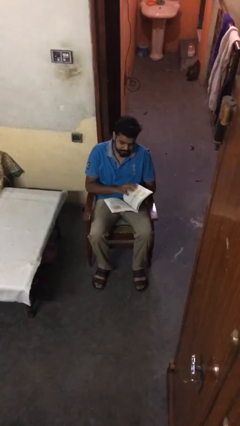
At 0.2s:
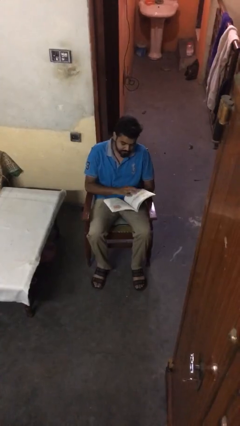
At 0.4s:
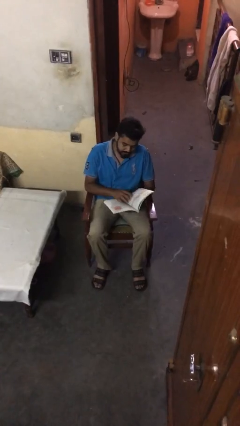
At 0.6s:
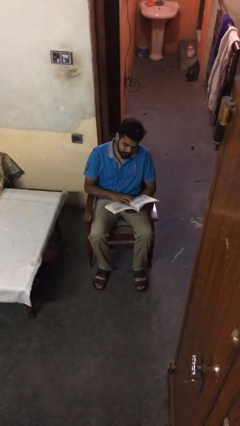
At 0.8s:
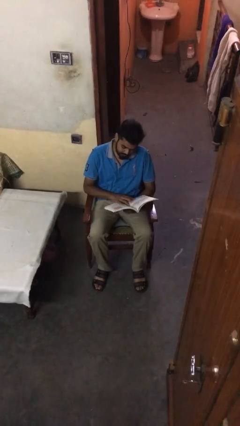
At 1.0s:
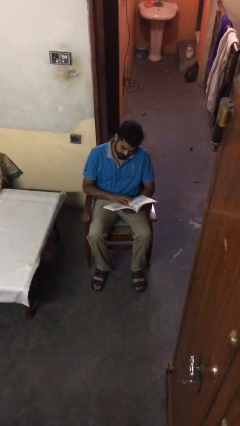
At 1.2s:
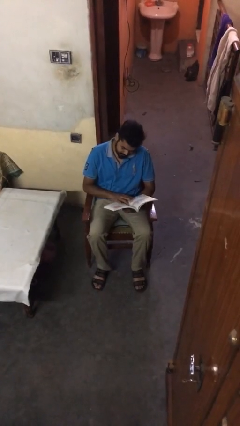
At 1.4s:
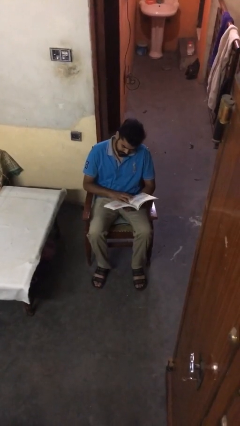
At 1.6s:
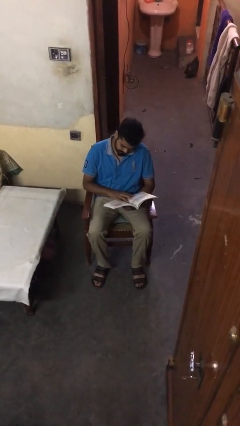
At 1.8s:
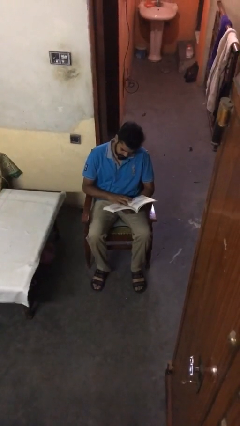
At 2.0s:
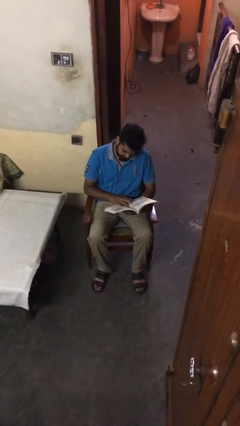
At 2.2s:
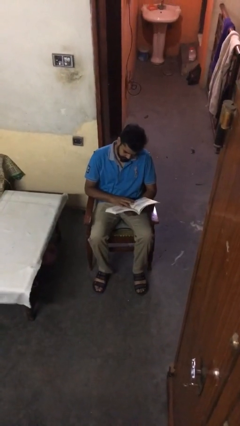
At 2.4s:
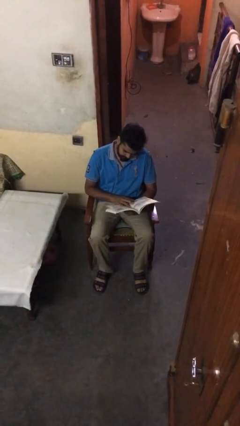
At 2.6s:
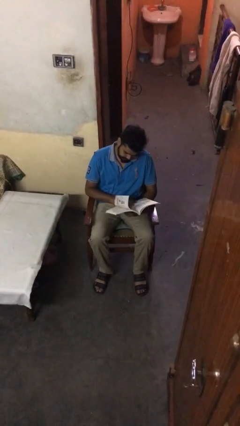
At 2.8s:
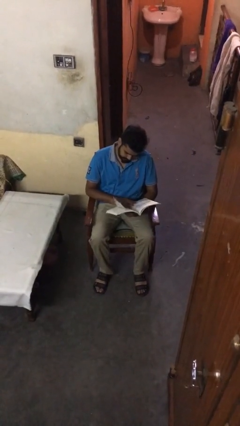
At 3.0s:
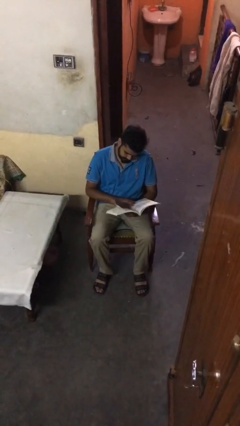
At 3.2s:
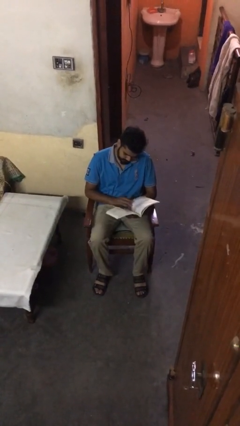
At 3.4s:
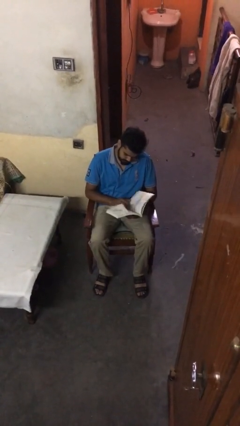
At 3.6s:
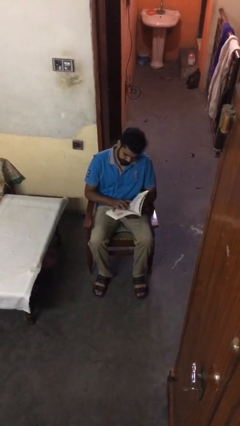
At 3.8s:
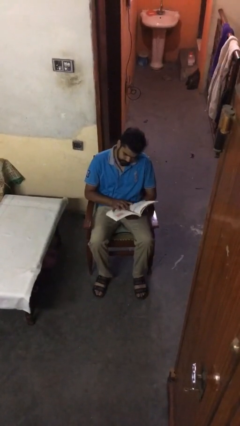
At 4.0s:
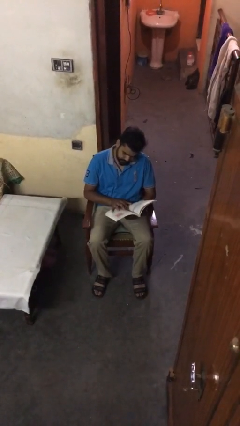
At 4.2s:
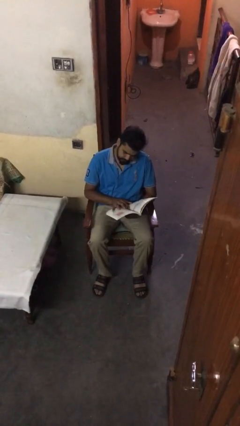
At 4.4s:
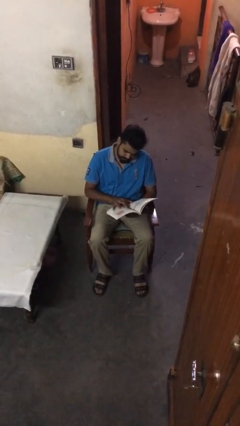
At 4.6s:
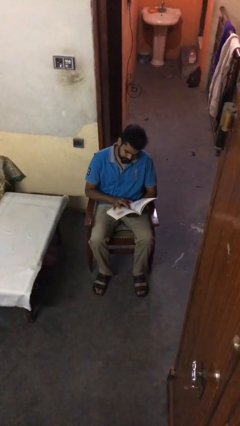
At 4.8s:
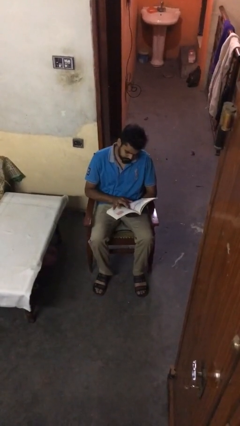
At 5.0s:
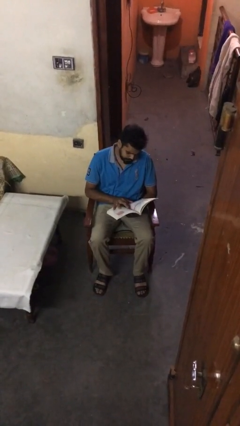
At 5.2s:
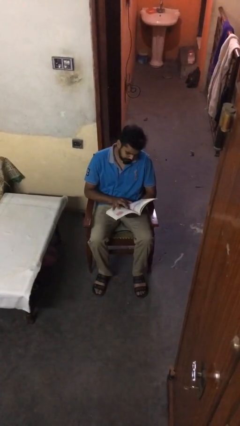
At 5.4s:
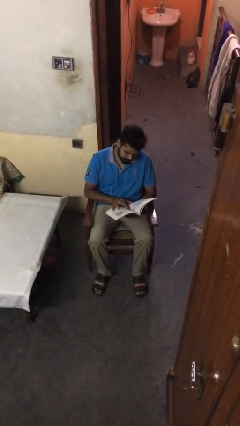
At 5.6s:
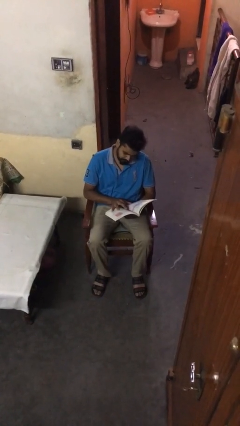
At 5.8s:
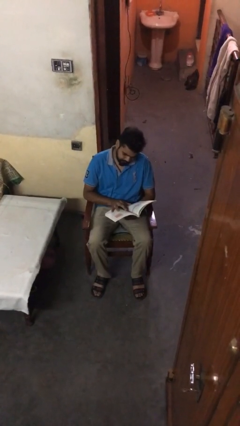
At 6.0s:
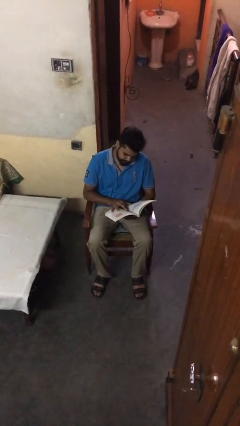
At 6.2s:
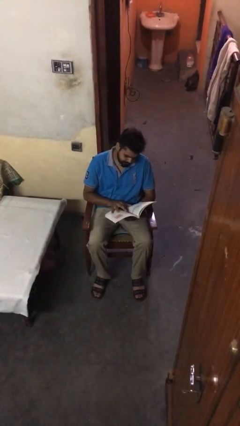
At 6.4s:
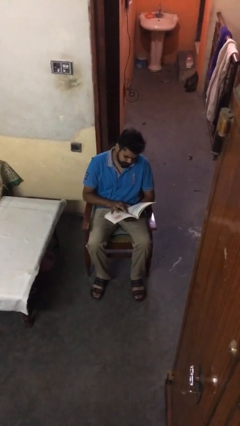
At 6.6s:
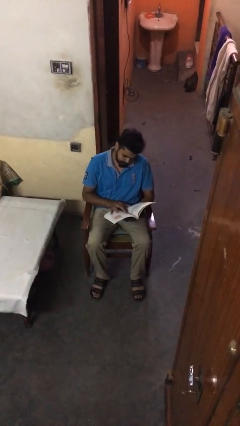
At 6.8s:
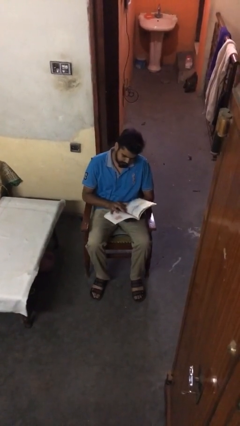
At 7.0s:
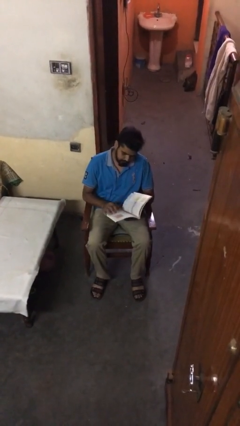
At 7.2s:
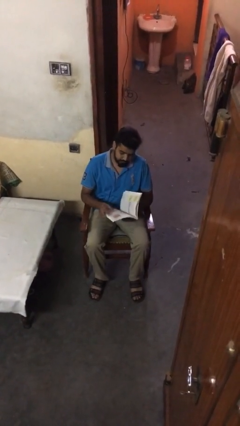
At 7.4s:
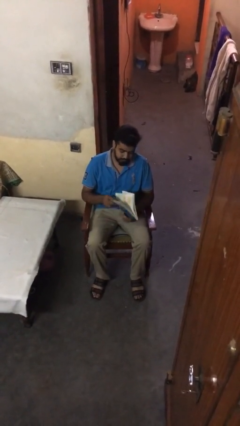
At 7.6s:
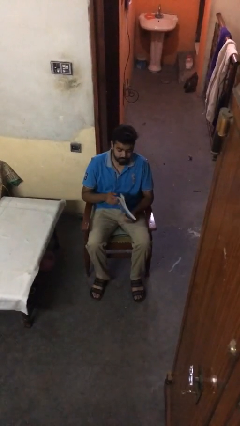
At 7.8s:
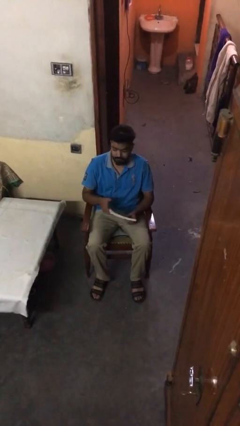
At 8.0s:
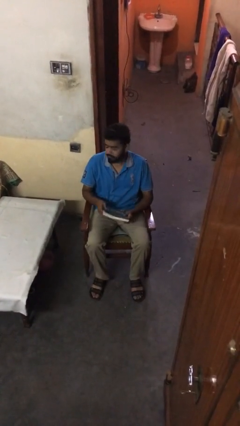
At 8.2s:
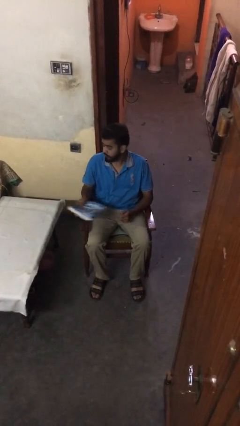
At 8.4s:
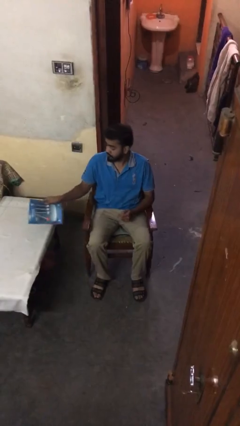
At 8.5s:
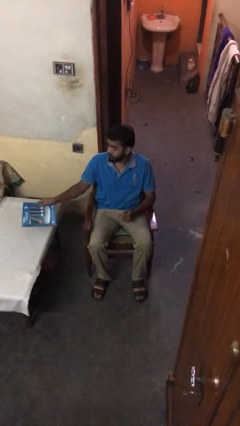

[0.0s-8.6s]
person reads document

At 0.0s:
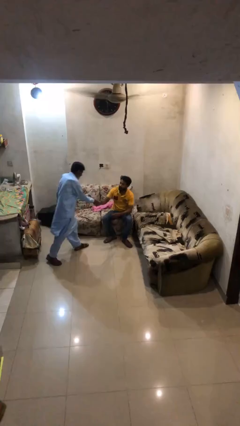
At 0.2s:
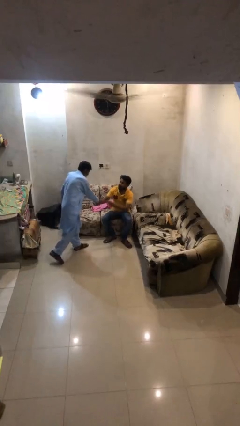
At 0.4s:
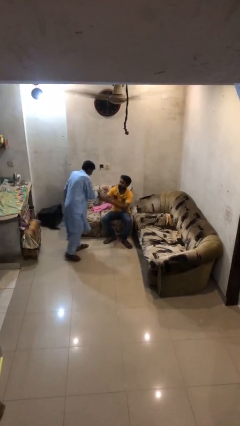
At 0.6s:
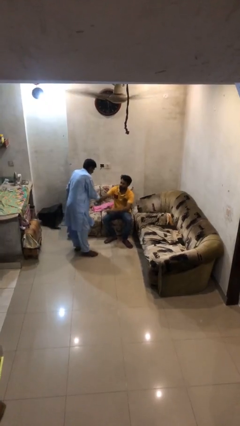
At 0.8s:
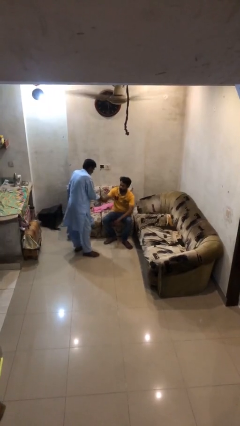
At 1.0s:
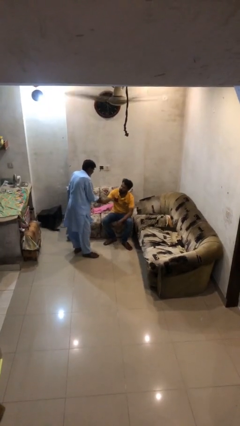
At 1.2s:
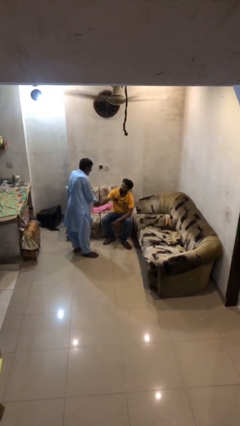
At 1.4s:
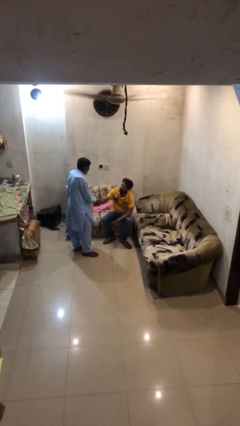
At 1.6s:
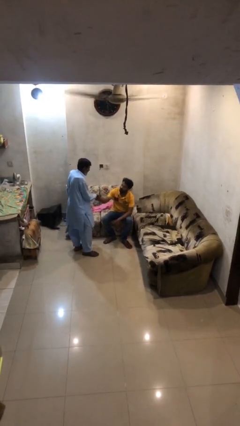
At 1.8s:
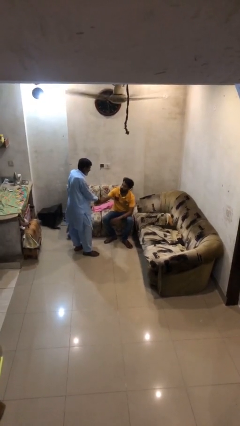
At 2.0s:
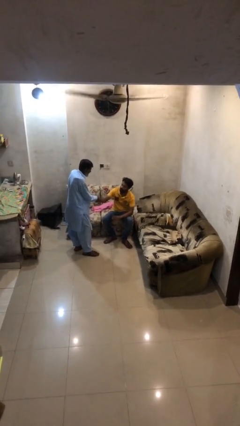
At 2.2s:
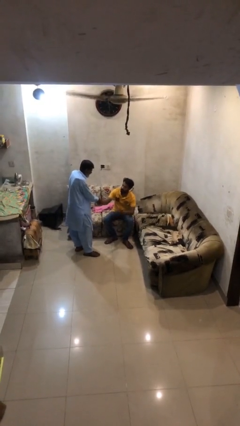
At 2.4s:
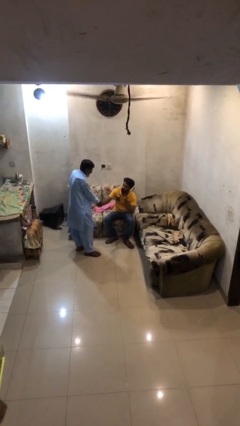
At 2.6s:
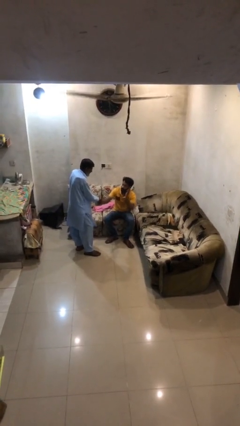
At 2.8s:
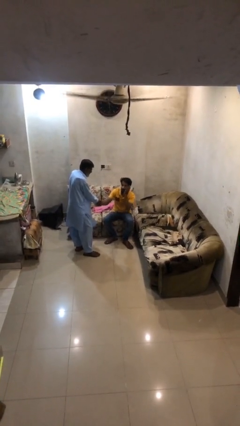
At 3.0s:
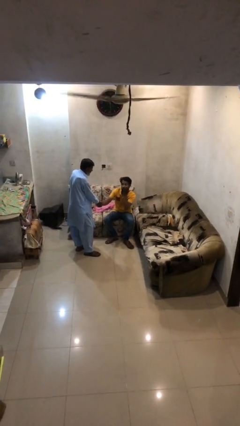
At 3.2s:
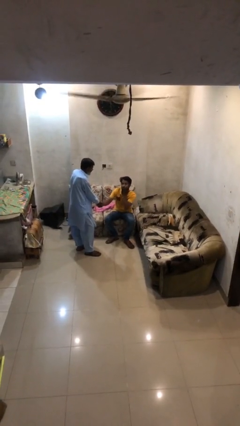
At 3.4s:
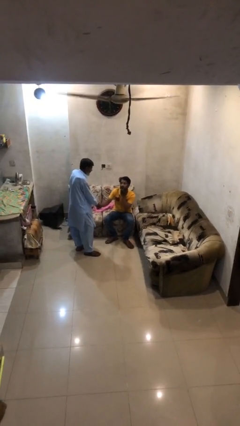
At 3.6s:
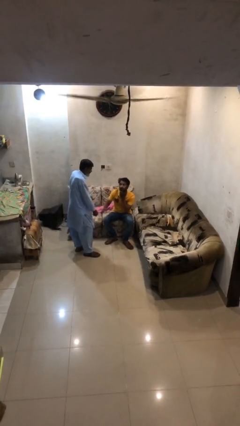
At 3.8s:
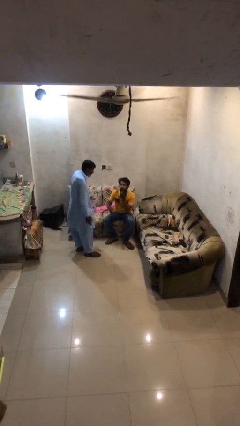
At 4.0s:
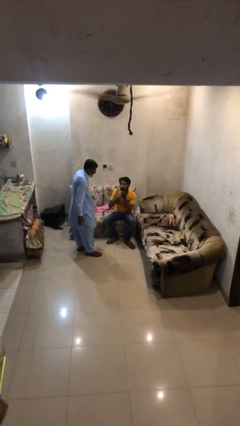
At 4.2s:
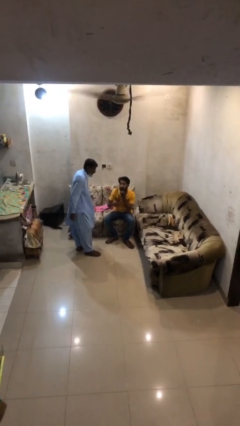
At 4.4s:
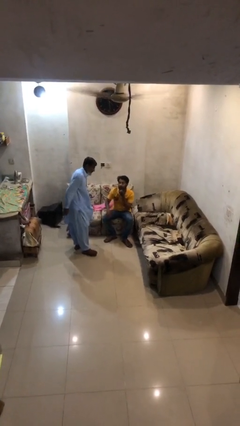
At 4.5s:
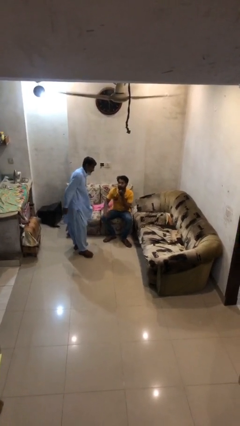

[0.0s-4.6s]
person shakes hand

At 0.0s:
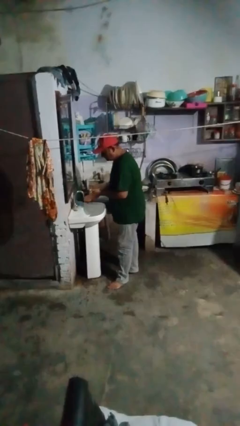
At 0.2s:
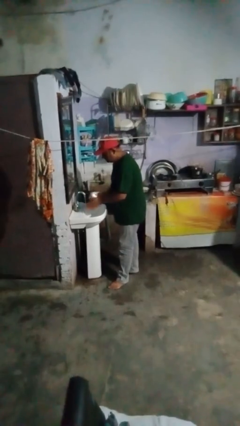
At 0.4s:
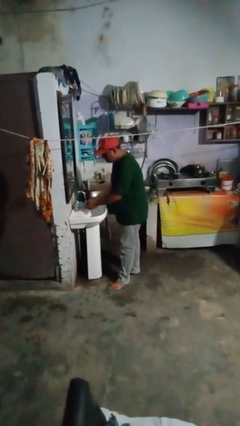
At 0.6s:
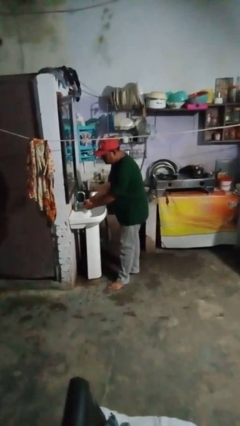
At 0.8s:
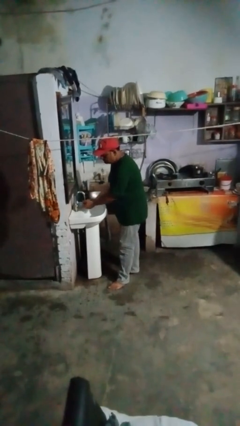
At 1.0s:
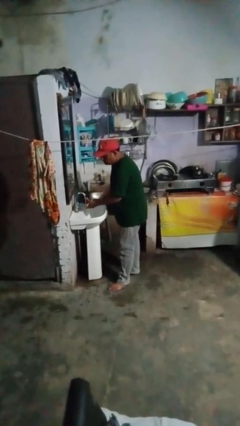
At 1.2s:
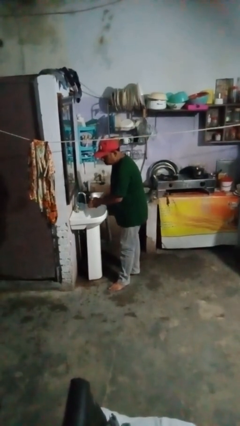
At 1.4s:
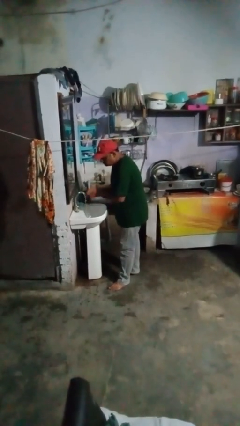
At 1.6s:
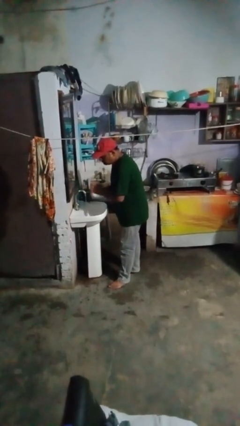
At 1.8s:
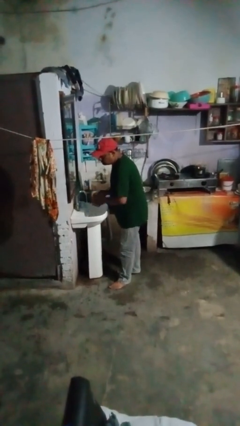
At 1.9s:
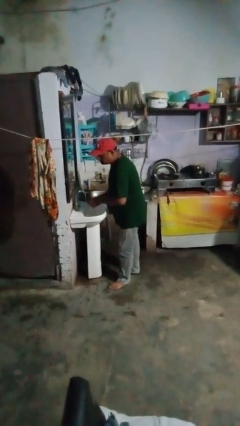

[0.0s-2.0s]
person washes hands

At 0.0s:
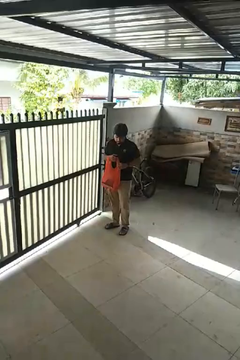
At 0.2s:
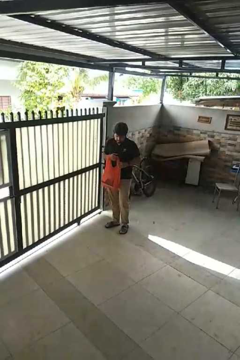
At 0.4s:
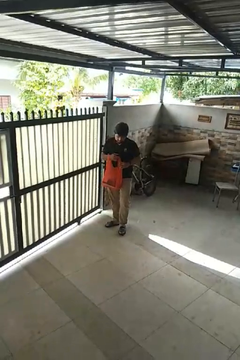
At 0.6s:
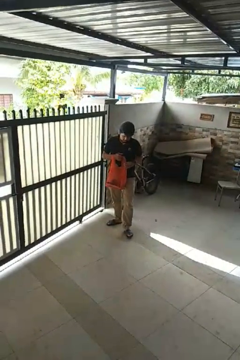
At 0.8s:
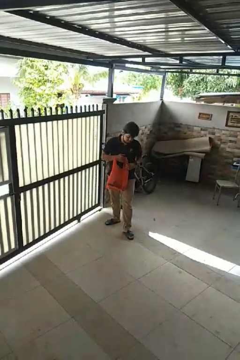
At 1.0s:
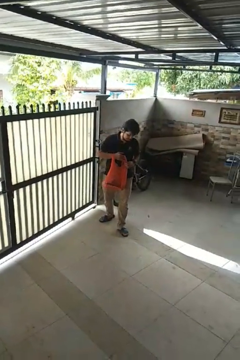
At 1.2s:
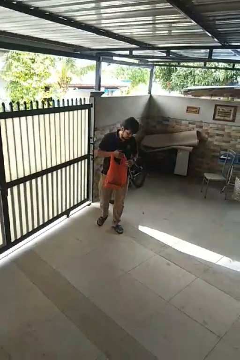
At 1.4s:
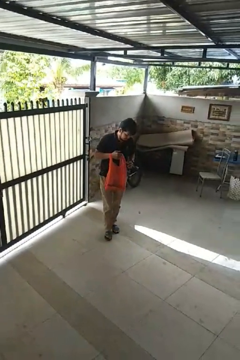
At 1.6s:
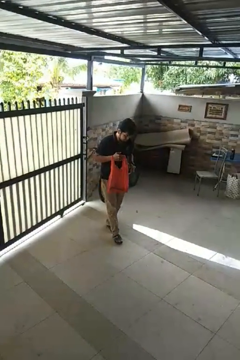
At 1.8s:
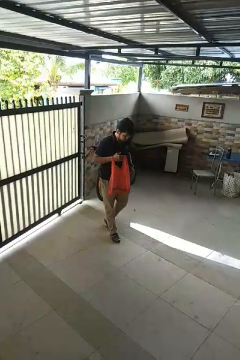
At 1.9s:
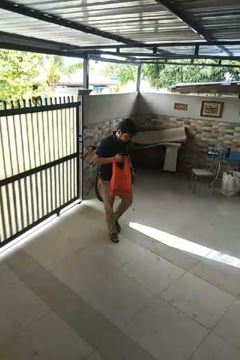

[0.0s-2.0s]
person carries groceries

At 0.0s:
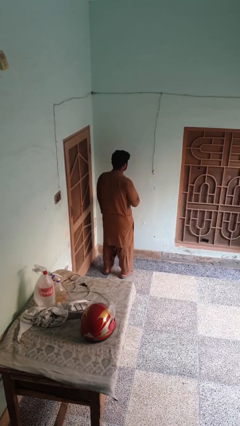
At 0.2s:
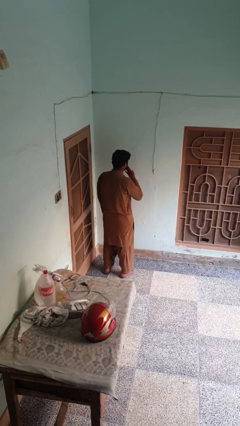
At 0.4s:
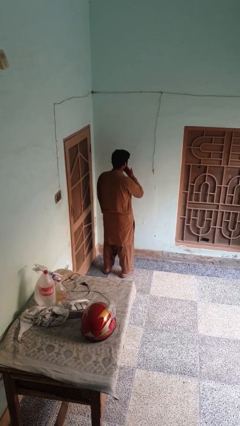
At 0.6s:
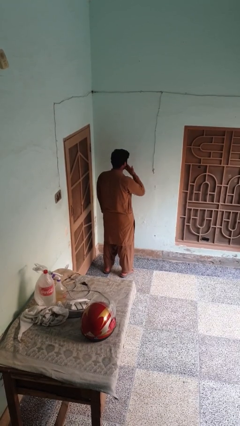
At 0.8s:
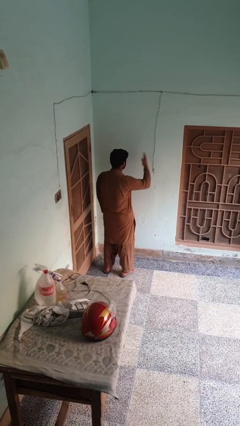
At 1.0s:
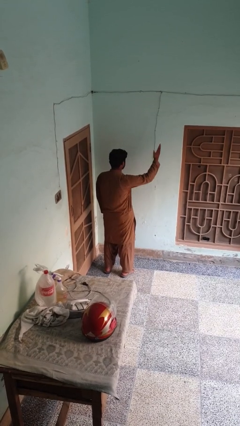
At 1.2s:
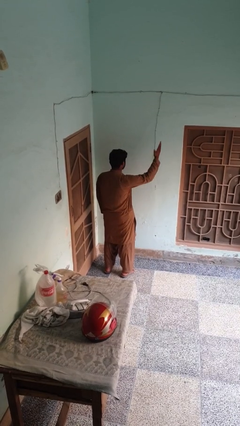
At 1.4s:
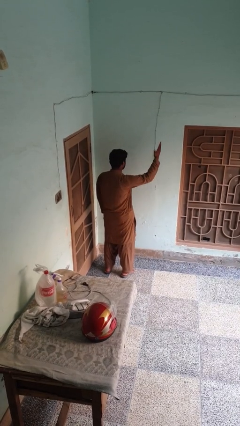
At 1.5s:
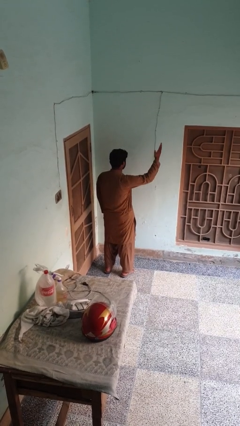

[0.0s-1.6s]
person gestures blow kiss
